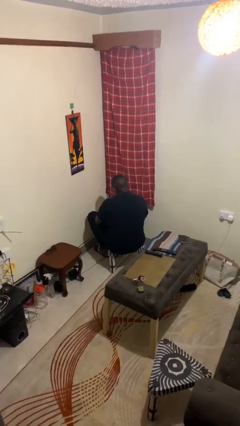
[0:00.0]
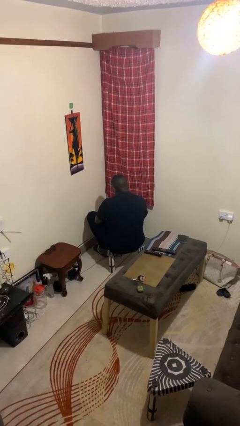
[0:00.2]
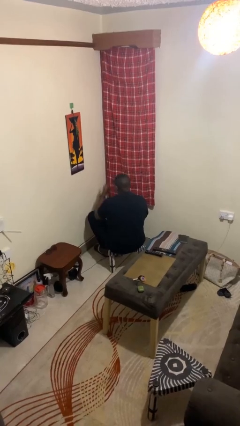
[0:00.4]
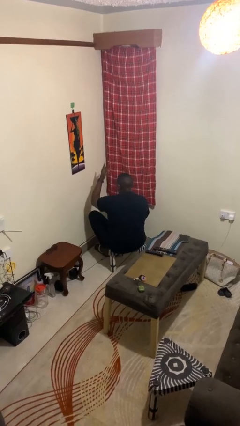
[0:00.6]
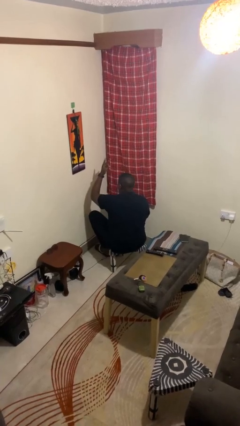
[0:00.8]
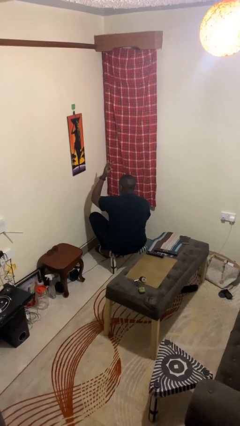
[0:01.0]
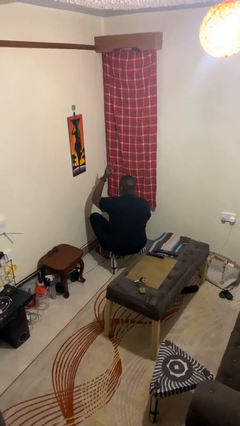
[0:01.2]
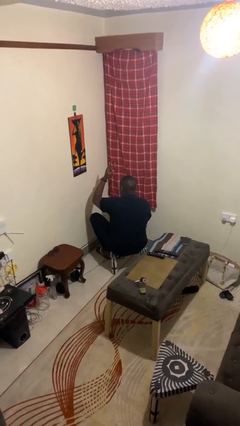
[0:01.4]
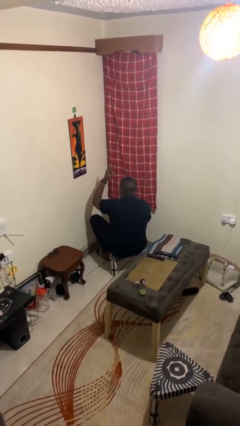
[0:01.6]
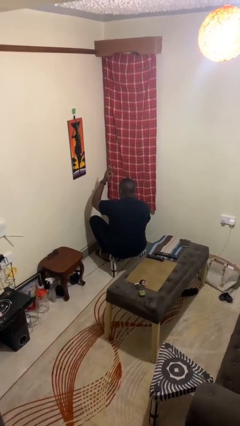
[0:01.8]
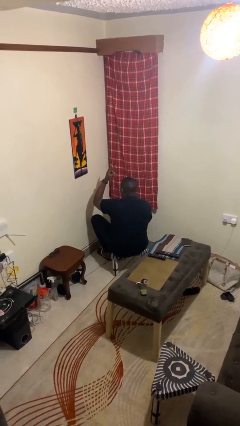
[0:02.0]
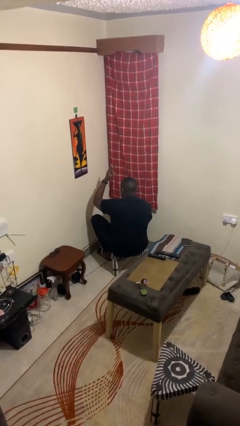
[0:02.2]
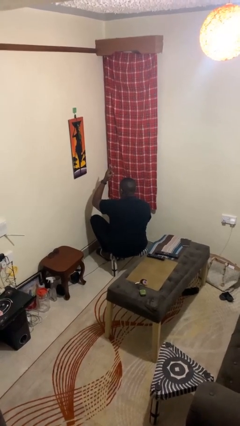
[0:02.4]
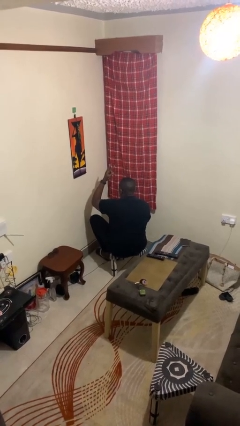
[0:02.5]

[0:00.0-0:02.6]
person gestures peace

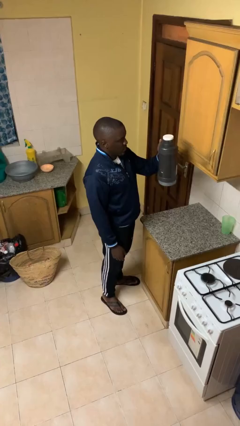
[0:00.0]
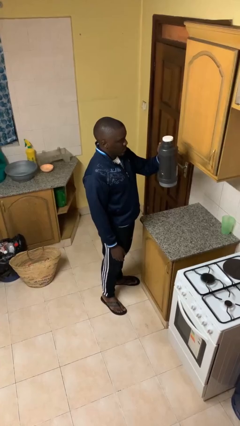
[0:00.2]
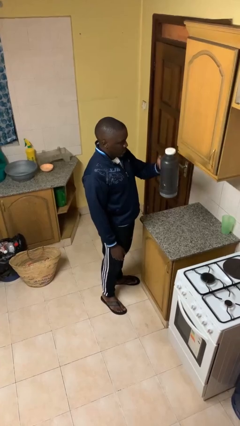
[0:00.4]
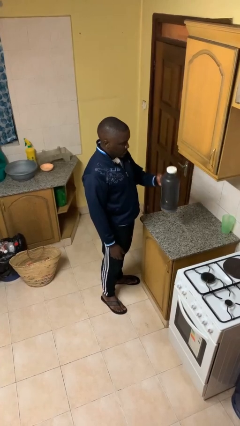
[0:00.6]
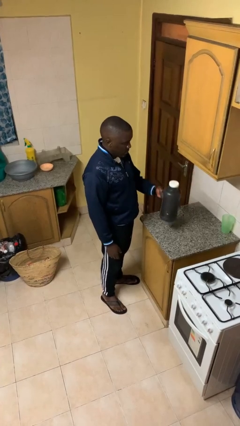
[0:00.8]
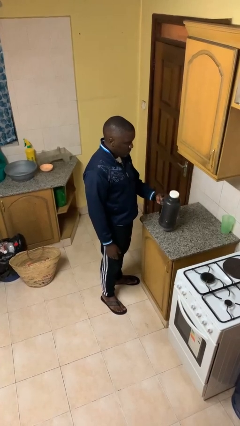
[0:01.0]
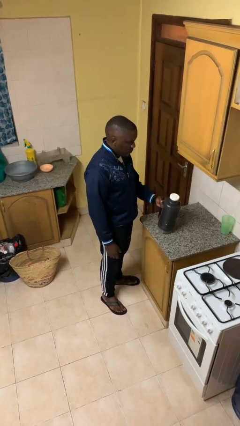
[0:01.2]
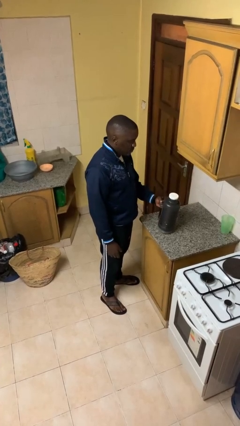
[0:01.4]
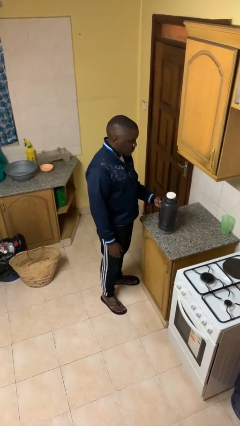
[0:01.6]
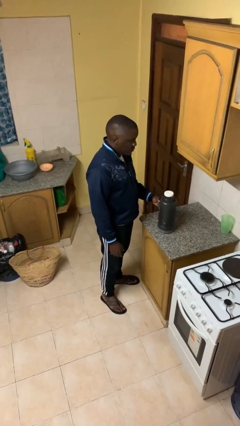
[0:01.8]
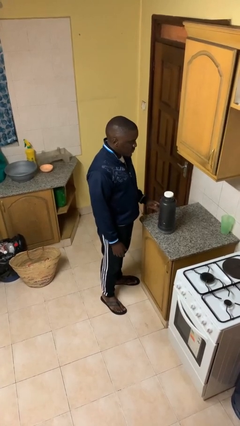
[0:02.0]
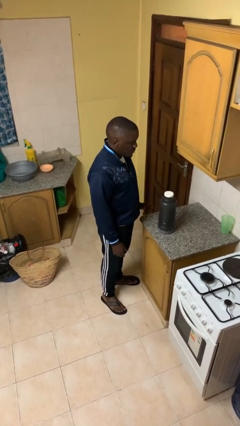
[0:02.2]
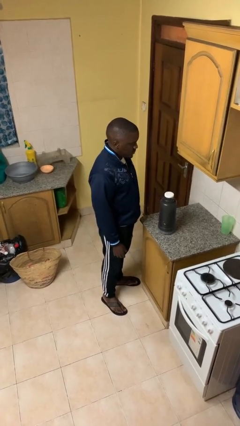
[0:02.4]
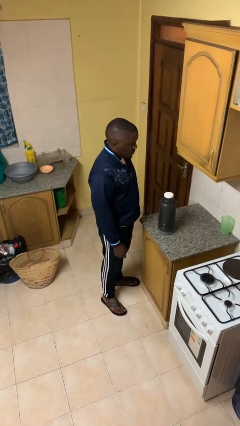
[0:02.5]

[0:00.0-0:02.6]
person puts down object on countertop

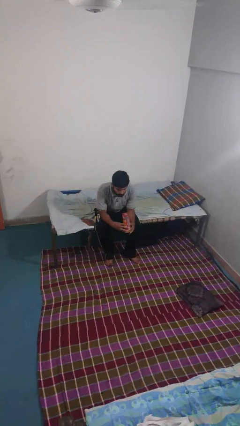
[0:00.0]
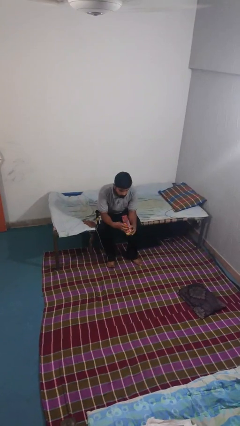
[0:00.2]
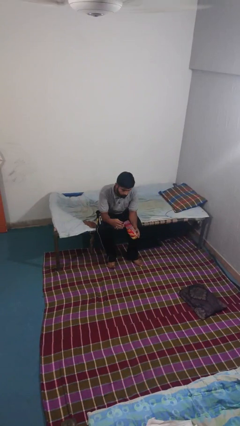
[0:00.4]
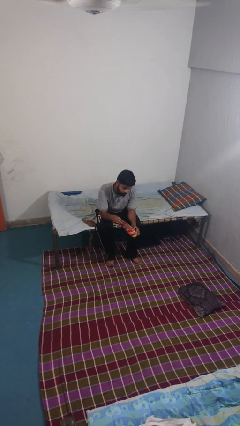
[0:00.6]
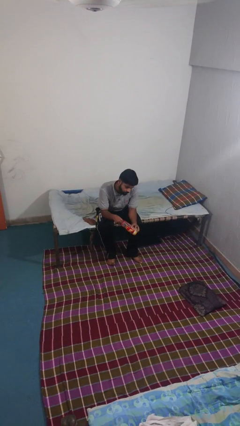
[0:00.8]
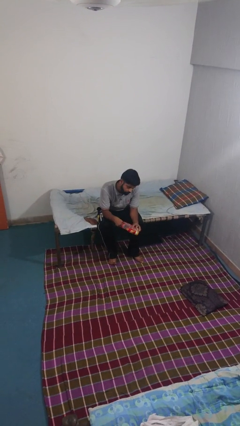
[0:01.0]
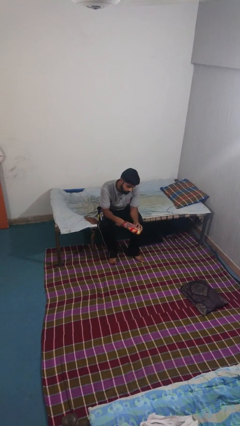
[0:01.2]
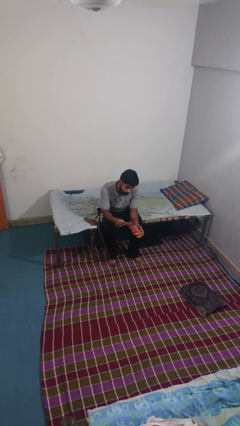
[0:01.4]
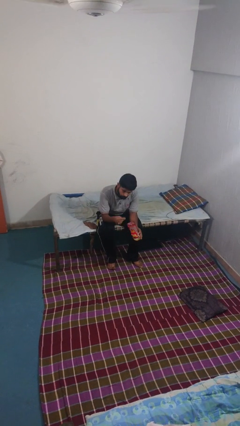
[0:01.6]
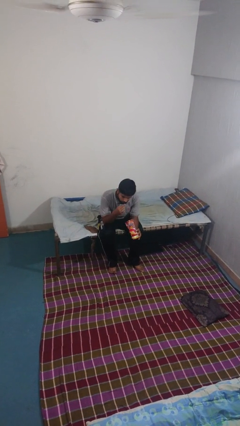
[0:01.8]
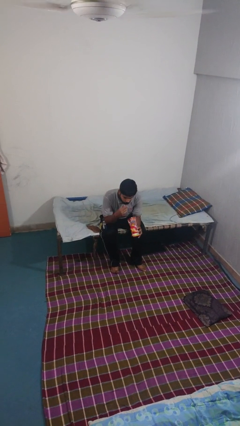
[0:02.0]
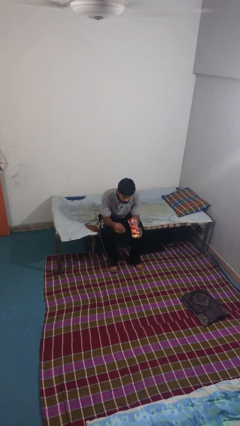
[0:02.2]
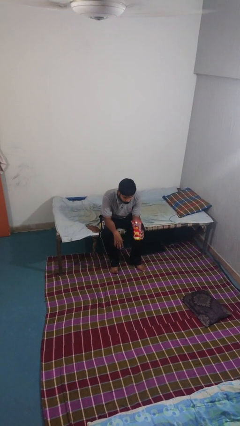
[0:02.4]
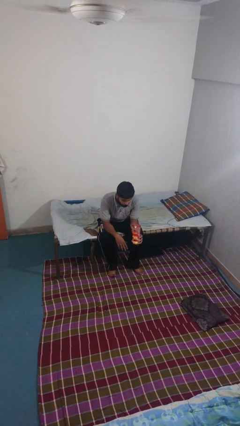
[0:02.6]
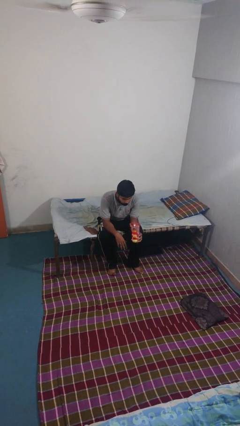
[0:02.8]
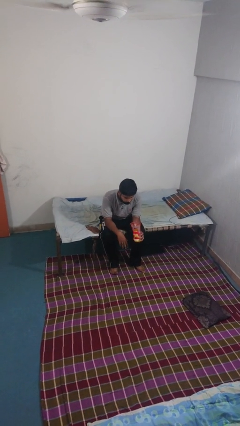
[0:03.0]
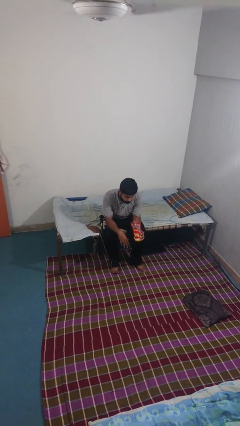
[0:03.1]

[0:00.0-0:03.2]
person eats snack from bag

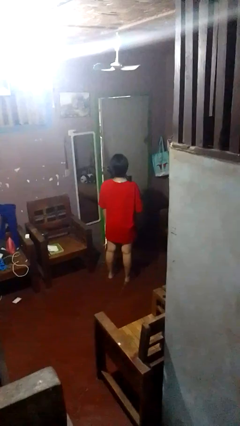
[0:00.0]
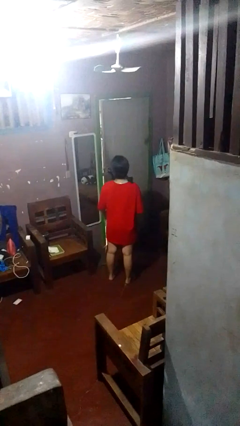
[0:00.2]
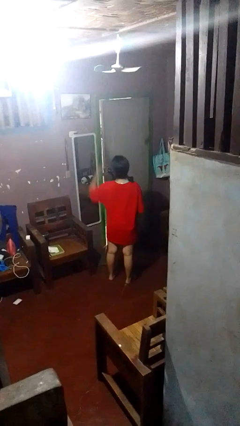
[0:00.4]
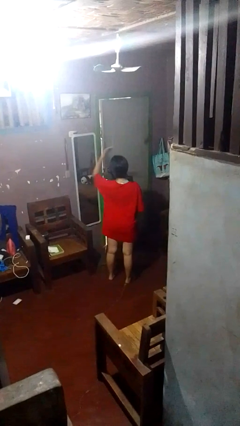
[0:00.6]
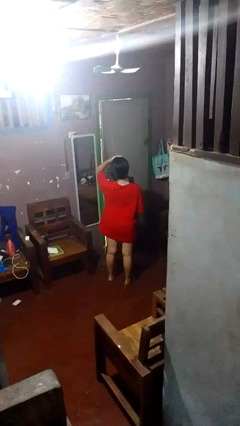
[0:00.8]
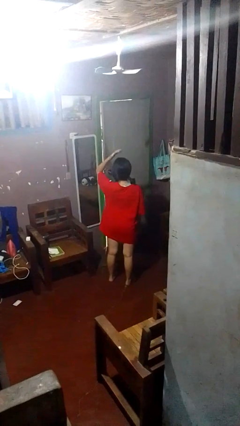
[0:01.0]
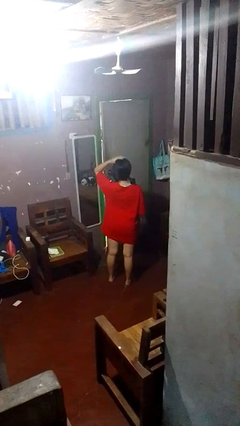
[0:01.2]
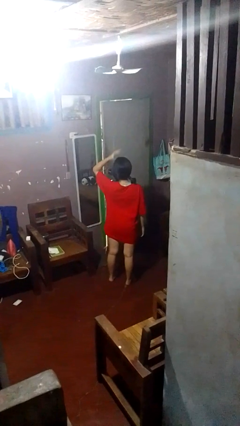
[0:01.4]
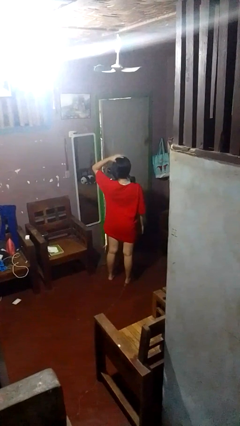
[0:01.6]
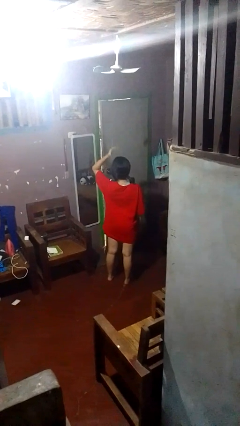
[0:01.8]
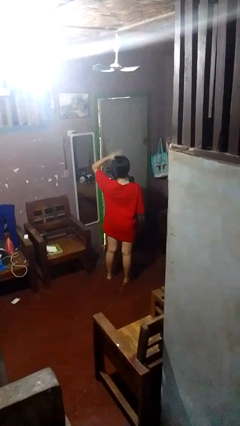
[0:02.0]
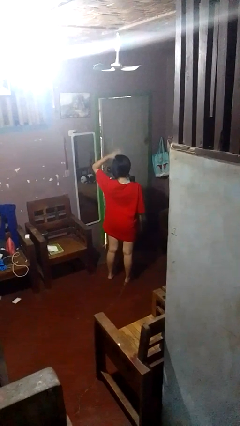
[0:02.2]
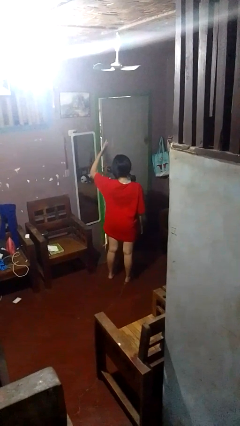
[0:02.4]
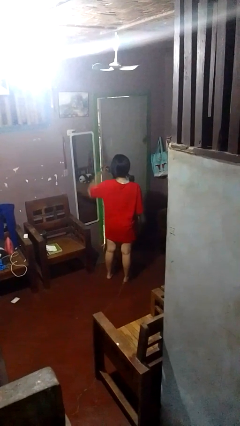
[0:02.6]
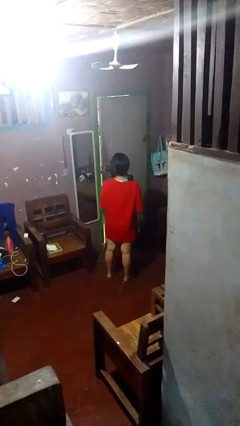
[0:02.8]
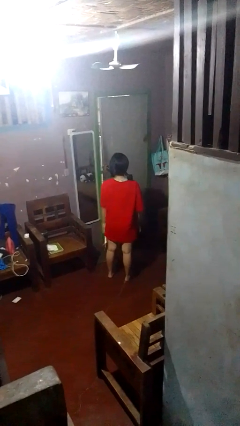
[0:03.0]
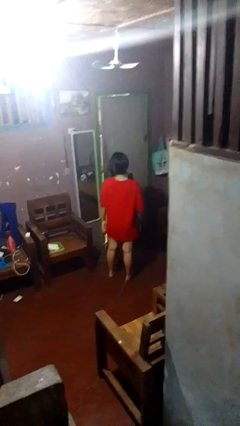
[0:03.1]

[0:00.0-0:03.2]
person pats head

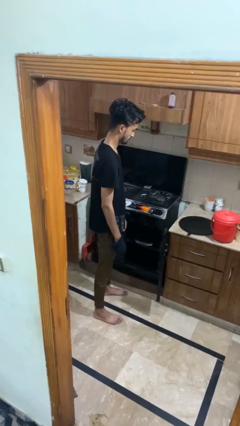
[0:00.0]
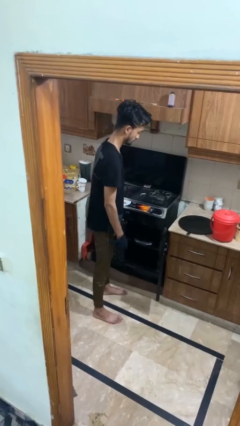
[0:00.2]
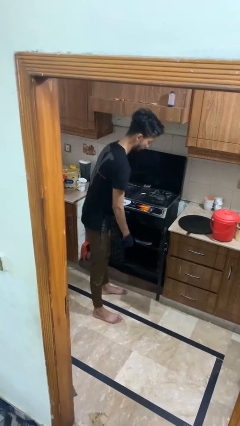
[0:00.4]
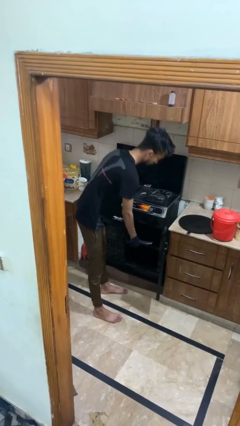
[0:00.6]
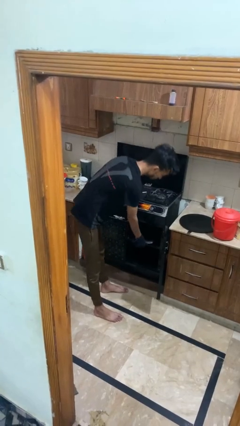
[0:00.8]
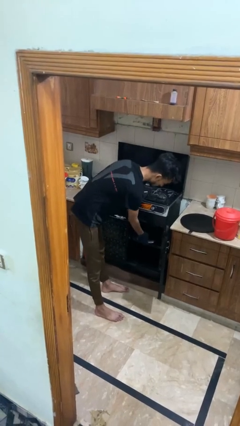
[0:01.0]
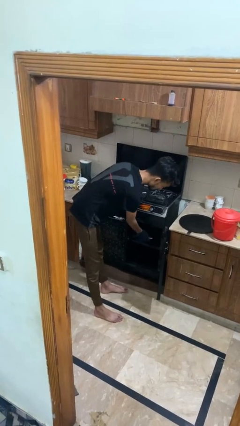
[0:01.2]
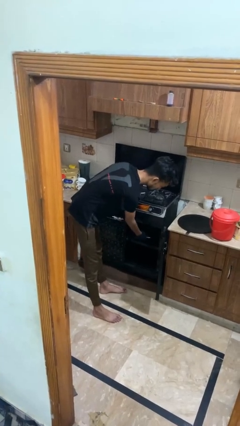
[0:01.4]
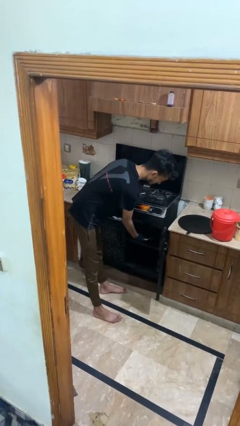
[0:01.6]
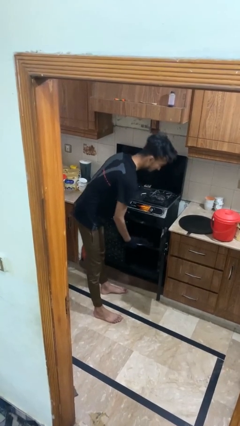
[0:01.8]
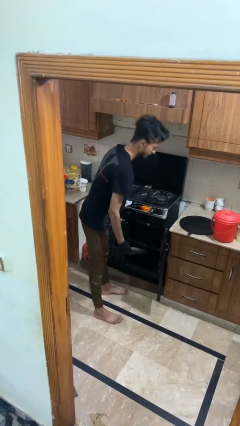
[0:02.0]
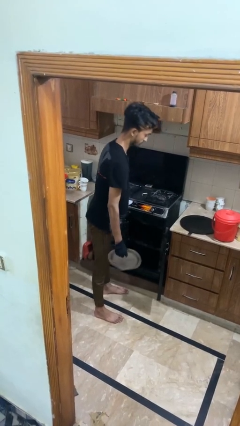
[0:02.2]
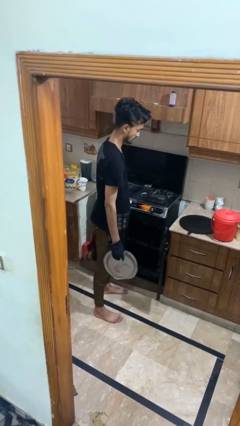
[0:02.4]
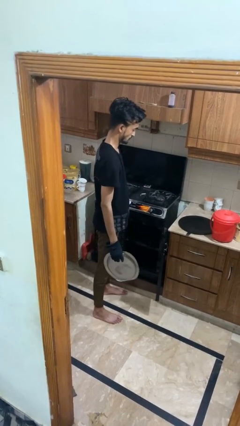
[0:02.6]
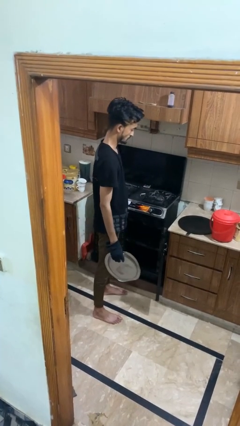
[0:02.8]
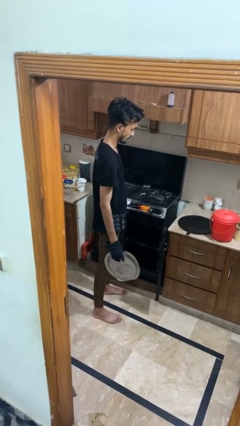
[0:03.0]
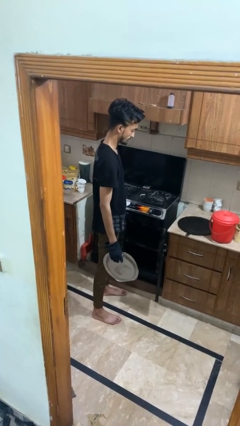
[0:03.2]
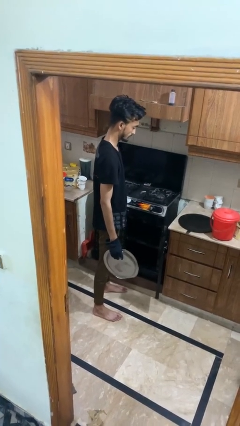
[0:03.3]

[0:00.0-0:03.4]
person takes object from oven

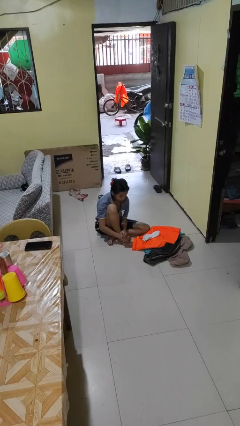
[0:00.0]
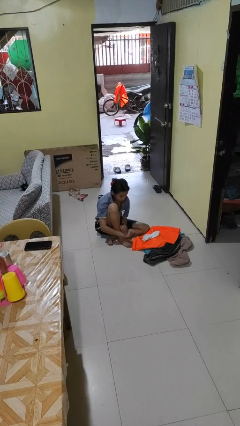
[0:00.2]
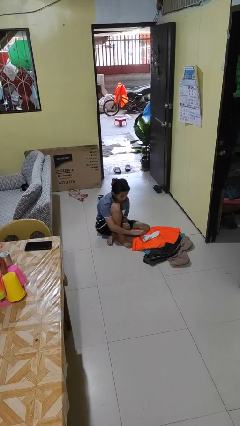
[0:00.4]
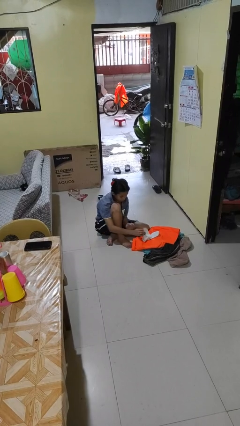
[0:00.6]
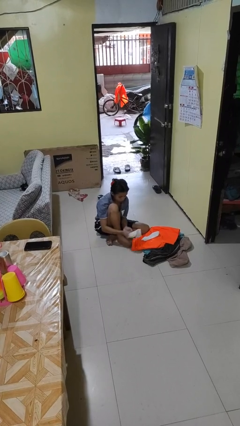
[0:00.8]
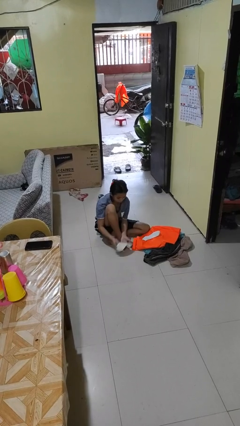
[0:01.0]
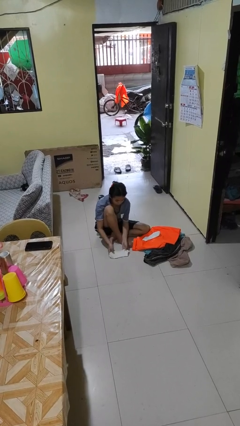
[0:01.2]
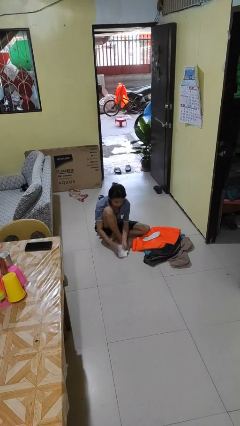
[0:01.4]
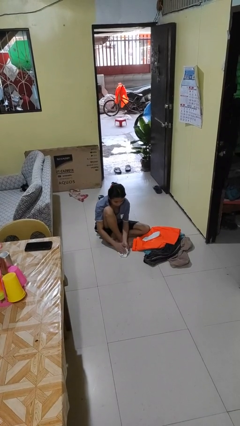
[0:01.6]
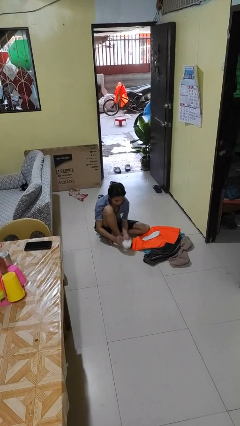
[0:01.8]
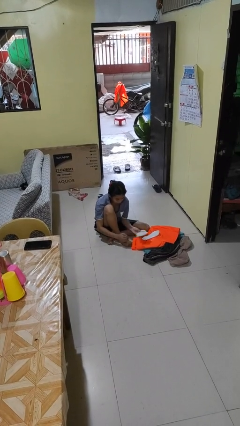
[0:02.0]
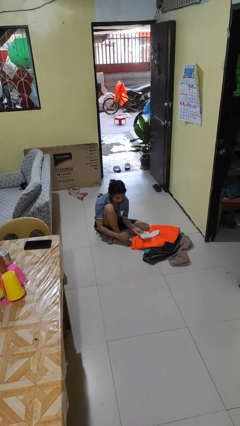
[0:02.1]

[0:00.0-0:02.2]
person folds socks
